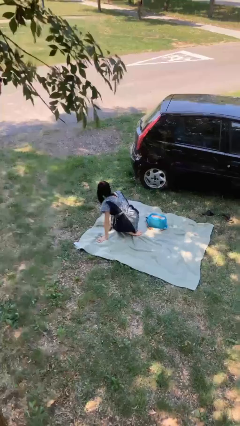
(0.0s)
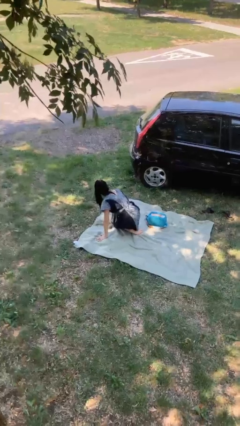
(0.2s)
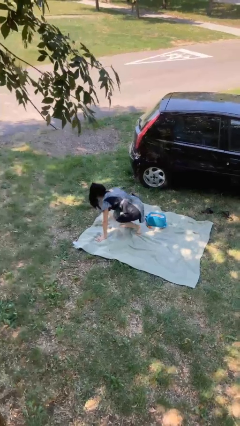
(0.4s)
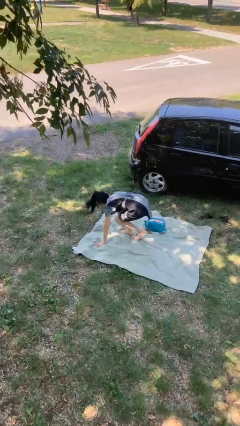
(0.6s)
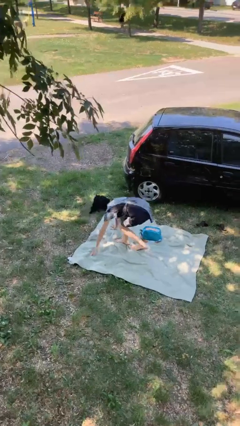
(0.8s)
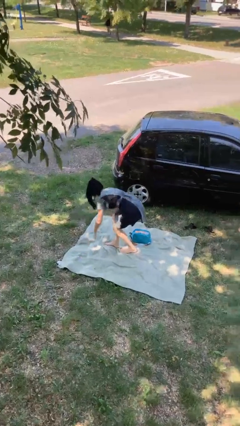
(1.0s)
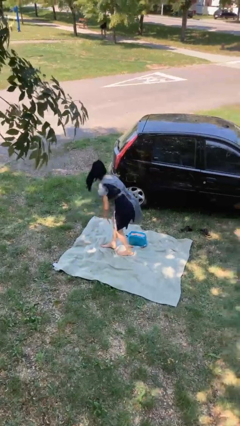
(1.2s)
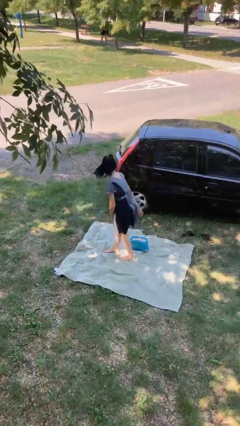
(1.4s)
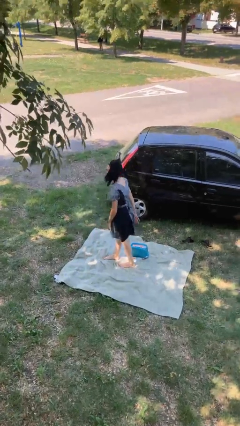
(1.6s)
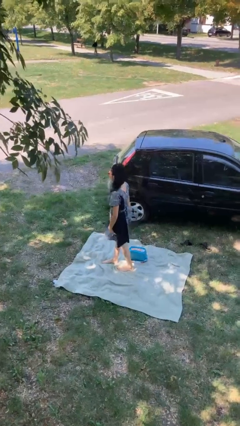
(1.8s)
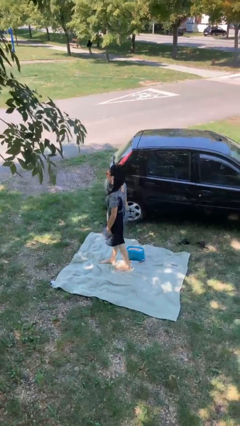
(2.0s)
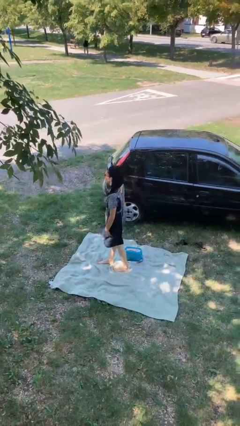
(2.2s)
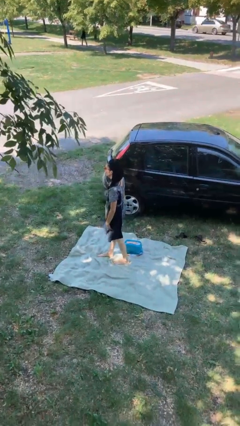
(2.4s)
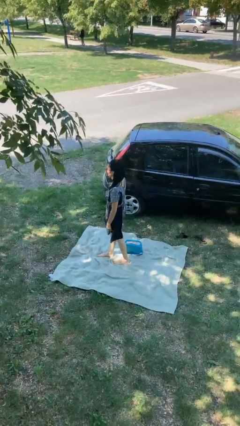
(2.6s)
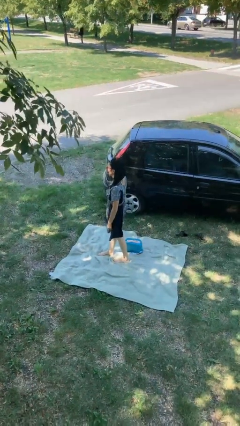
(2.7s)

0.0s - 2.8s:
person stands up from floor

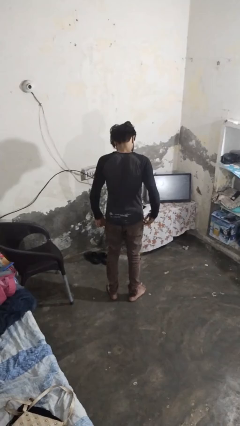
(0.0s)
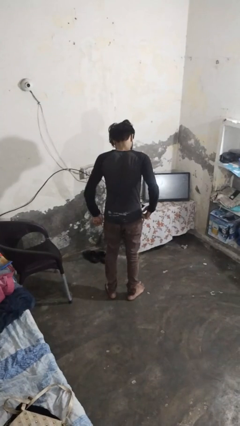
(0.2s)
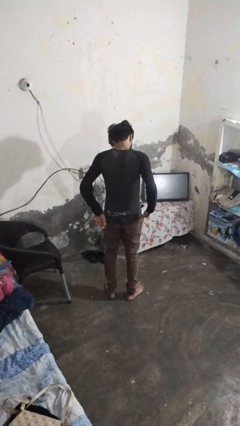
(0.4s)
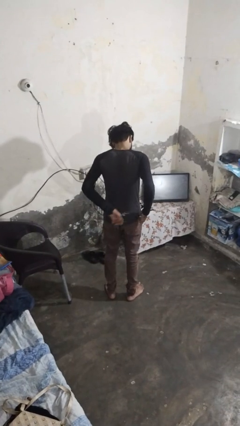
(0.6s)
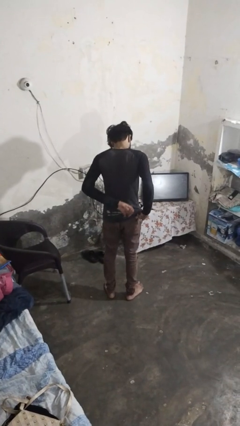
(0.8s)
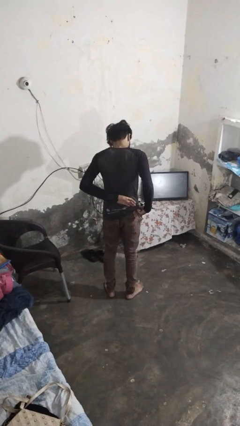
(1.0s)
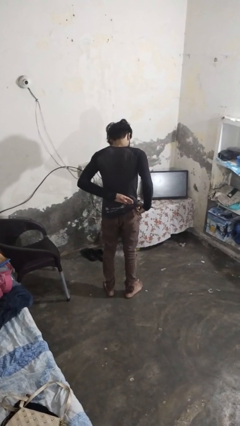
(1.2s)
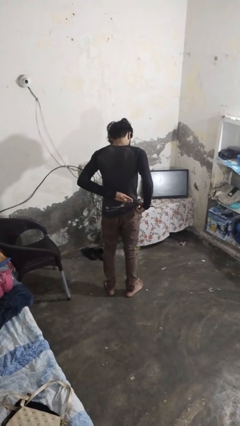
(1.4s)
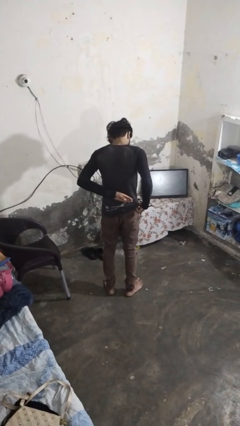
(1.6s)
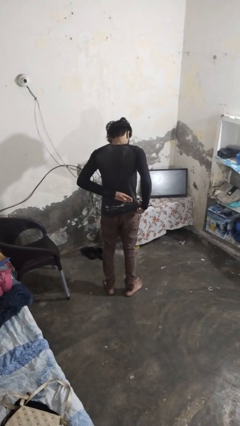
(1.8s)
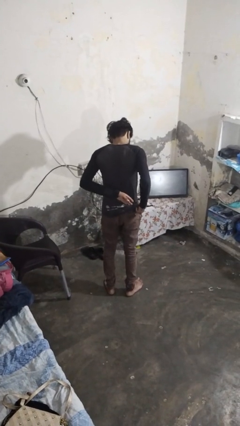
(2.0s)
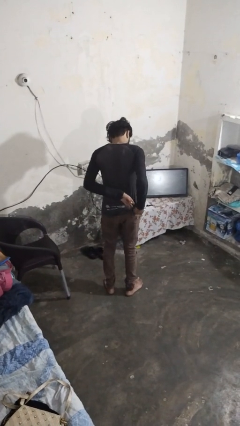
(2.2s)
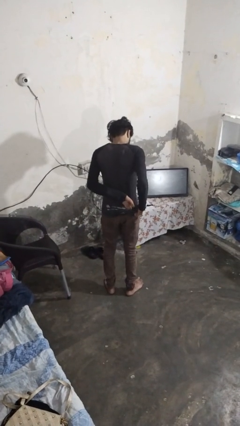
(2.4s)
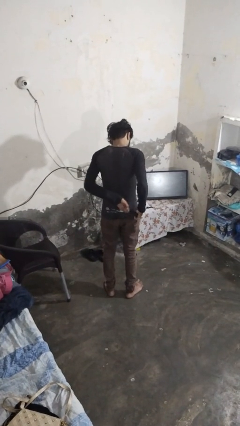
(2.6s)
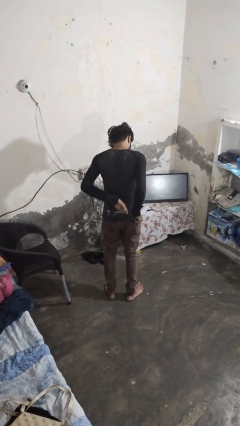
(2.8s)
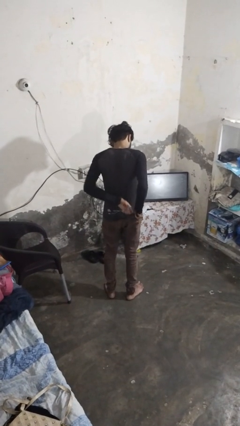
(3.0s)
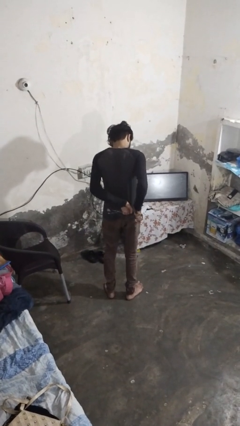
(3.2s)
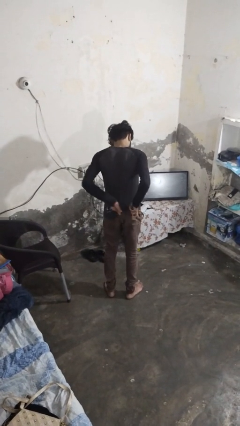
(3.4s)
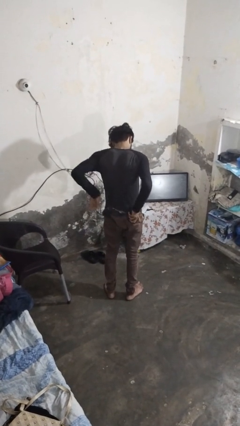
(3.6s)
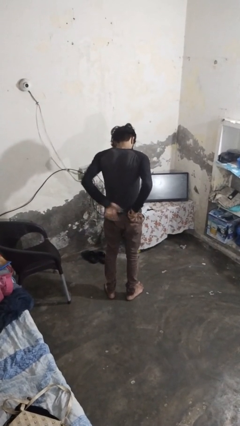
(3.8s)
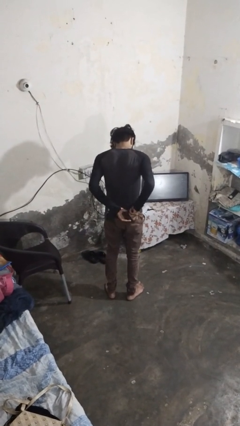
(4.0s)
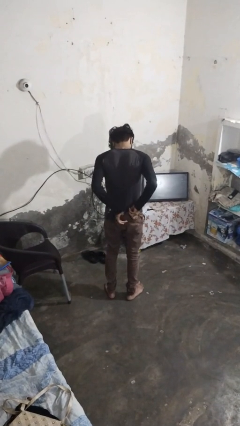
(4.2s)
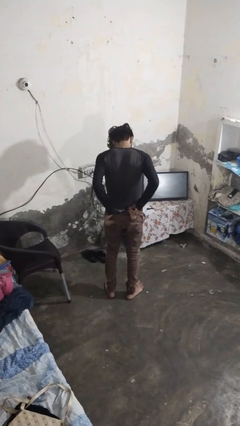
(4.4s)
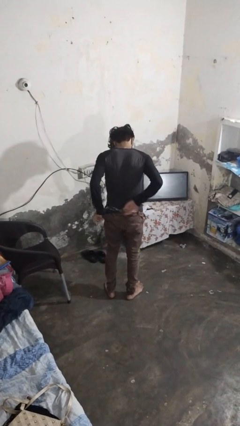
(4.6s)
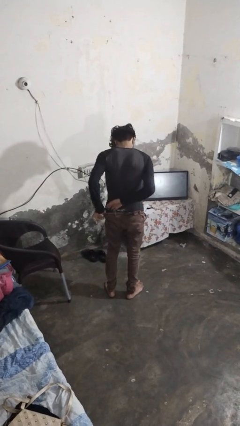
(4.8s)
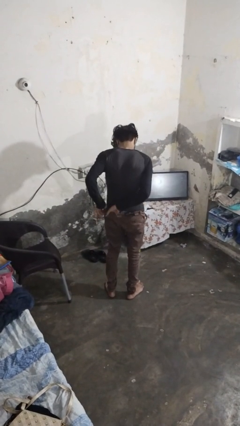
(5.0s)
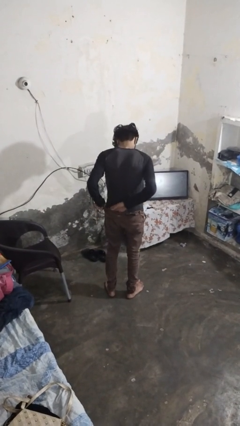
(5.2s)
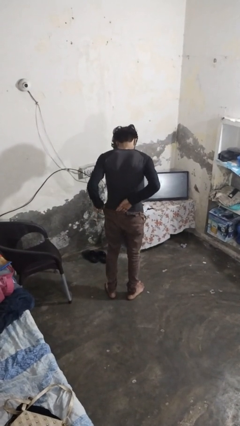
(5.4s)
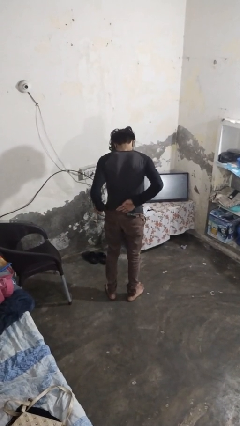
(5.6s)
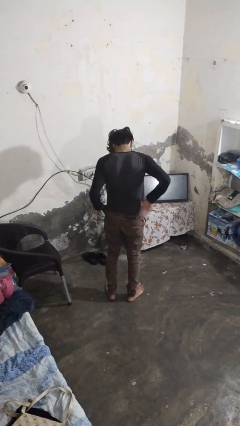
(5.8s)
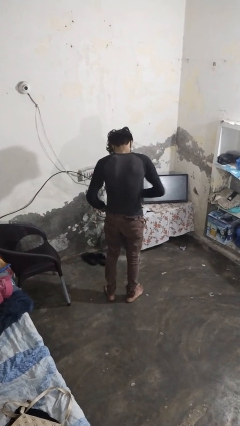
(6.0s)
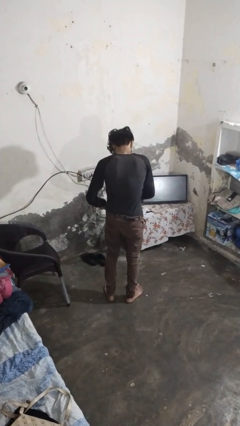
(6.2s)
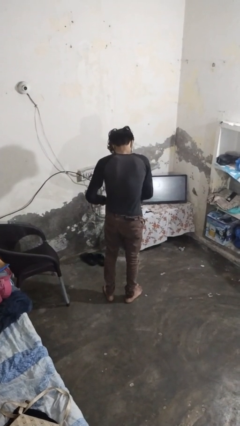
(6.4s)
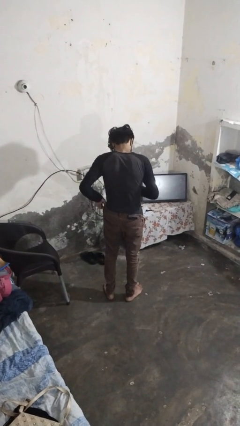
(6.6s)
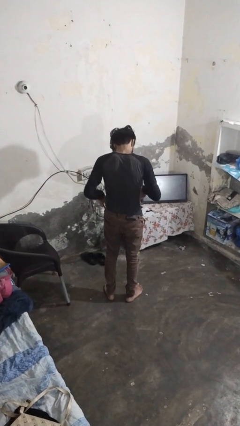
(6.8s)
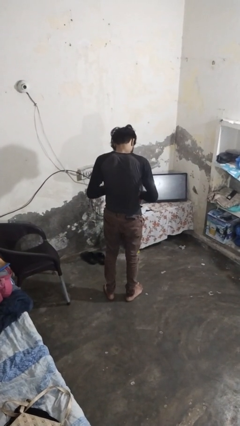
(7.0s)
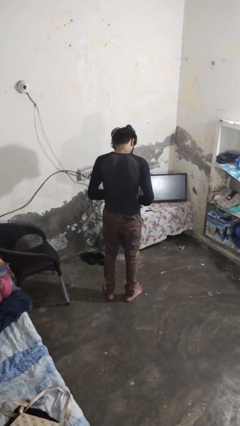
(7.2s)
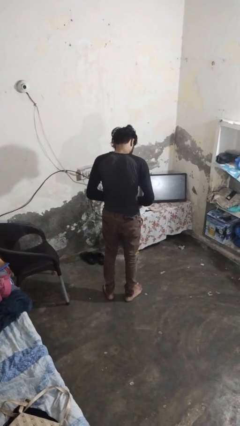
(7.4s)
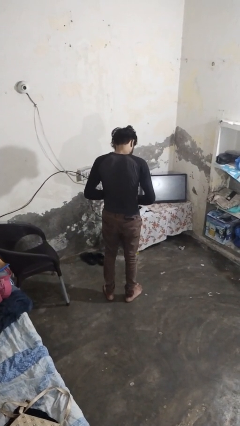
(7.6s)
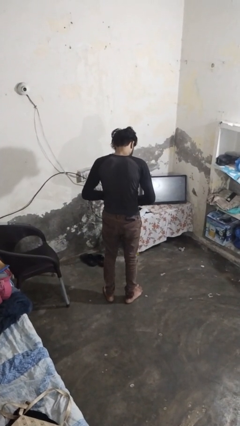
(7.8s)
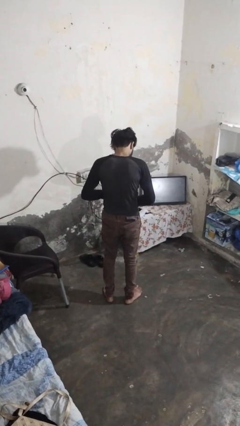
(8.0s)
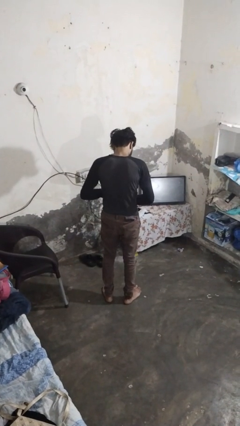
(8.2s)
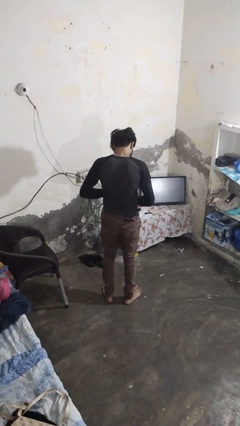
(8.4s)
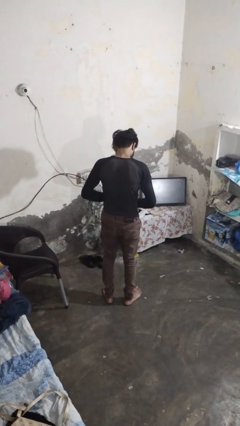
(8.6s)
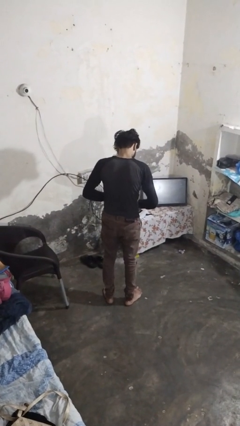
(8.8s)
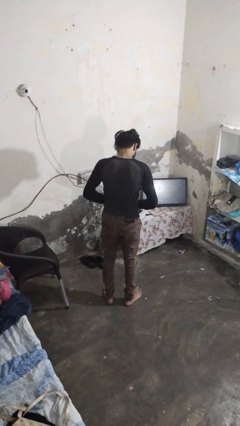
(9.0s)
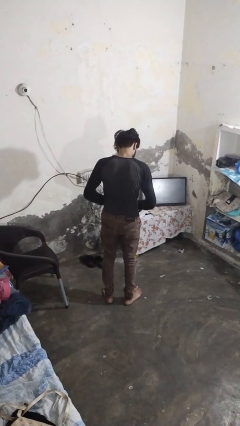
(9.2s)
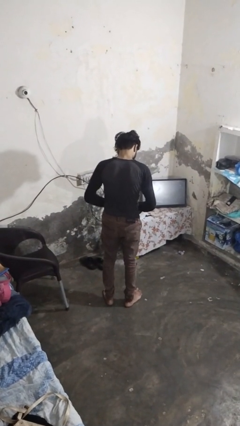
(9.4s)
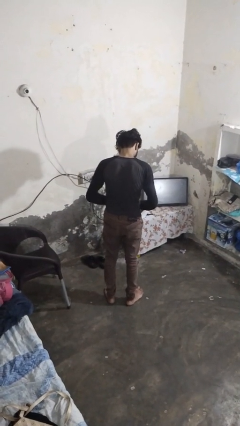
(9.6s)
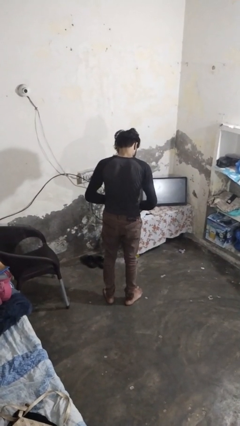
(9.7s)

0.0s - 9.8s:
person tucks in shirt

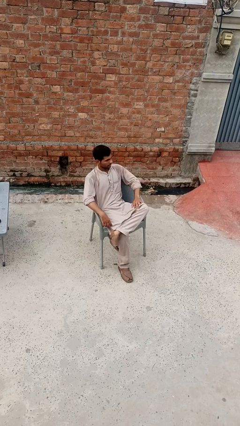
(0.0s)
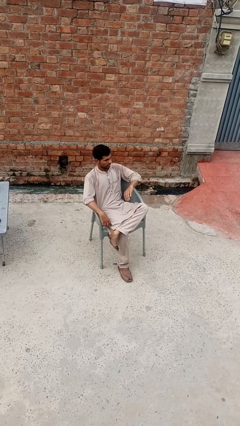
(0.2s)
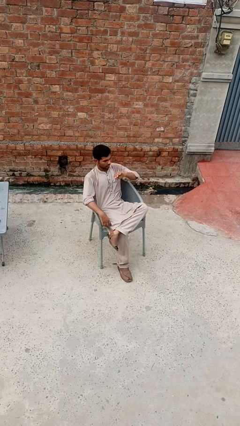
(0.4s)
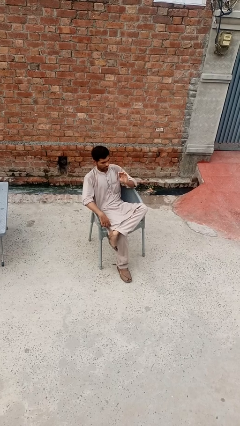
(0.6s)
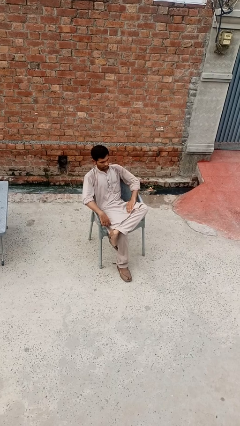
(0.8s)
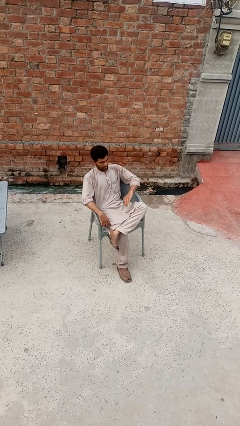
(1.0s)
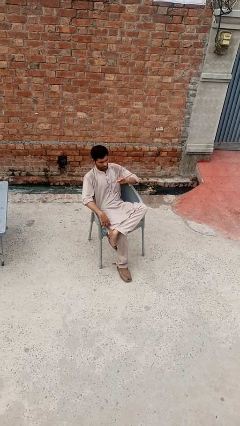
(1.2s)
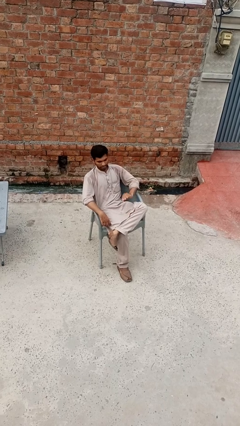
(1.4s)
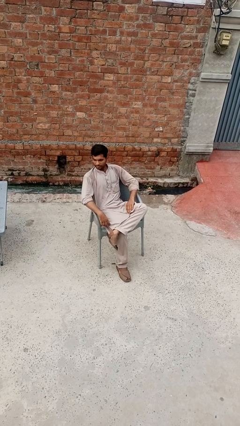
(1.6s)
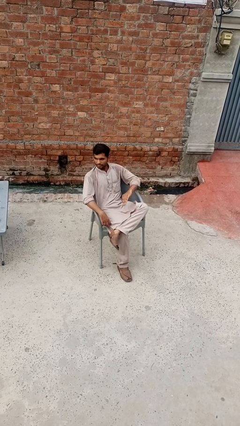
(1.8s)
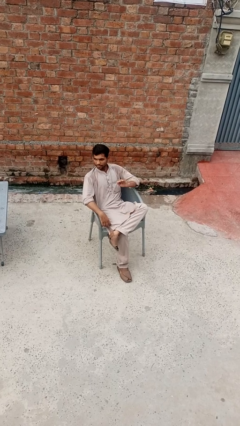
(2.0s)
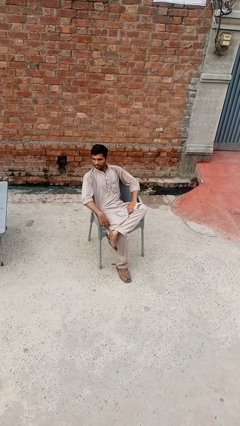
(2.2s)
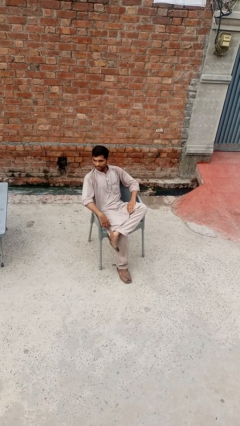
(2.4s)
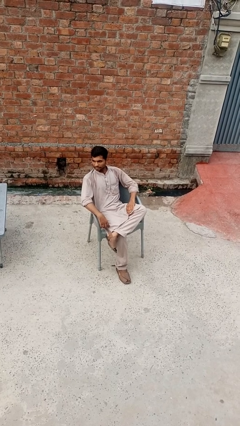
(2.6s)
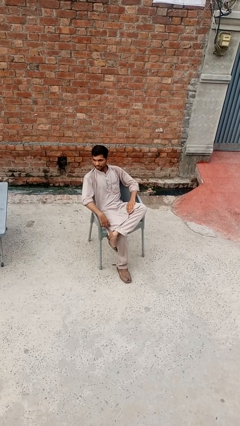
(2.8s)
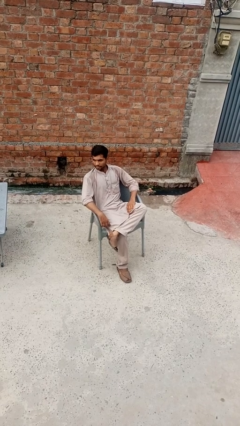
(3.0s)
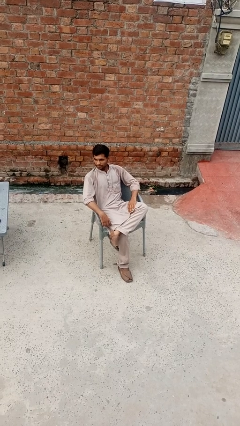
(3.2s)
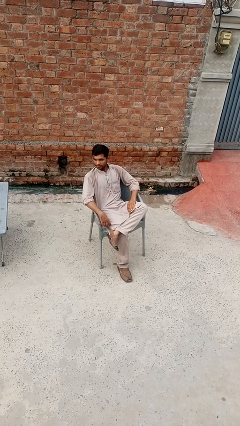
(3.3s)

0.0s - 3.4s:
person slaps hands on thighs

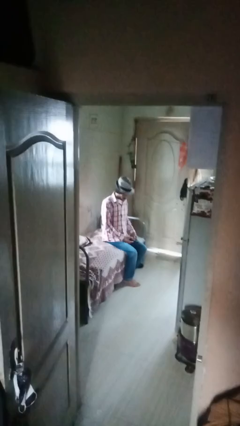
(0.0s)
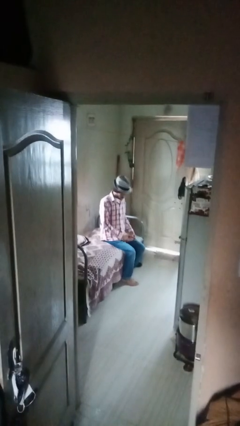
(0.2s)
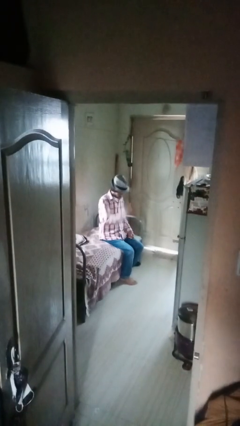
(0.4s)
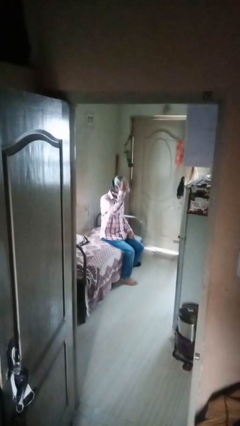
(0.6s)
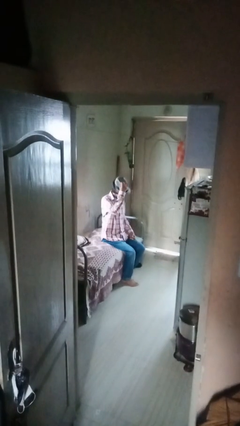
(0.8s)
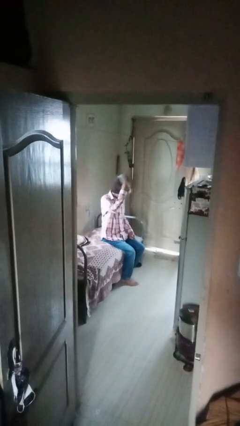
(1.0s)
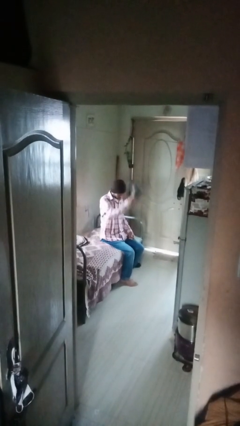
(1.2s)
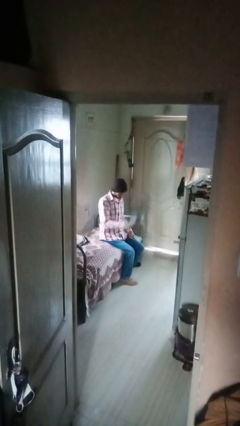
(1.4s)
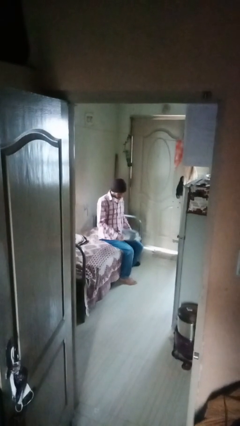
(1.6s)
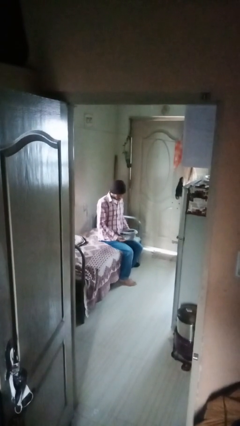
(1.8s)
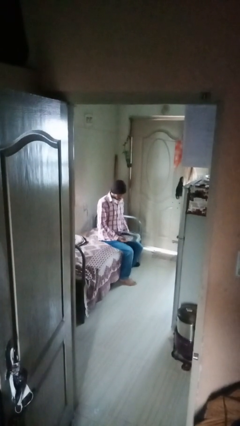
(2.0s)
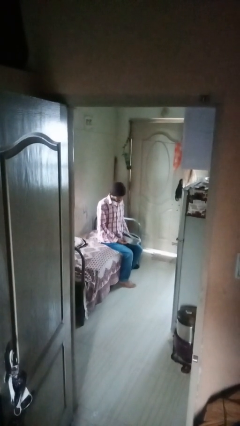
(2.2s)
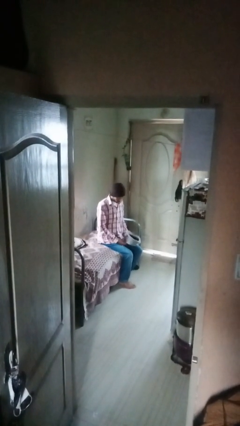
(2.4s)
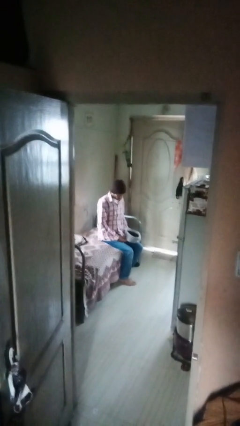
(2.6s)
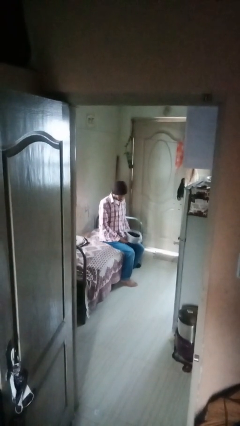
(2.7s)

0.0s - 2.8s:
person takes off hat
